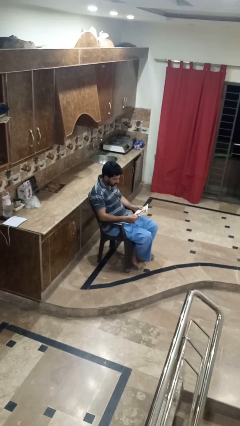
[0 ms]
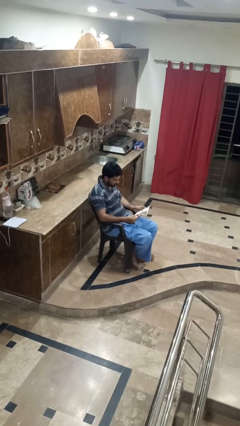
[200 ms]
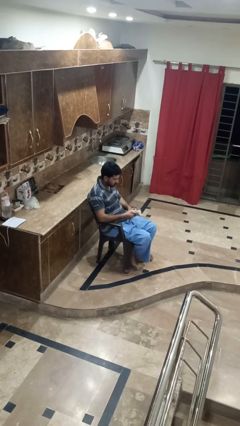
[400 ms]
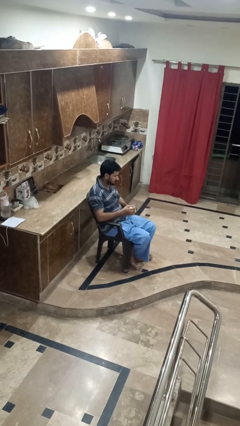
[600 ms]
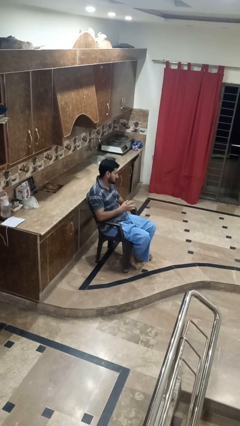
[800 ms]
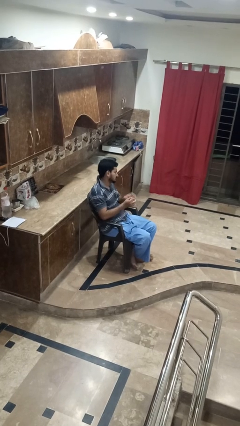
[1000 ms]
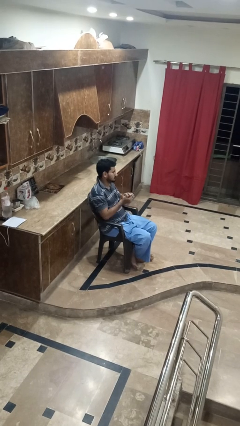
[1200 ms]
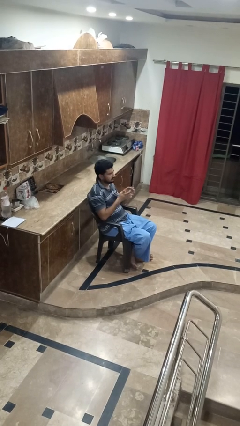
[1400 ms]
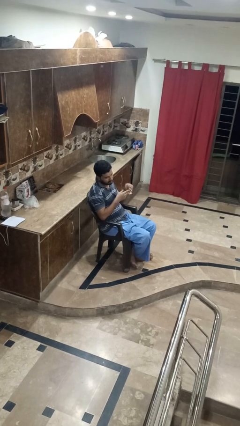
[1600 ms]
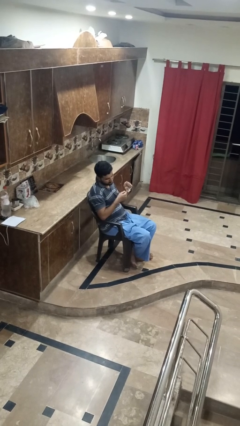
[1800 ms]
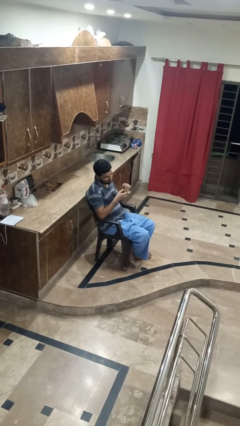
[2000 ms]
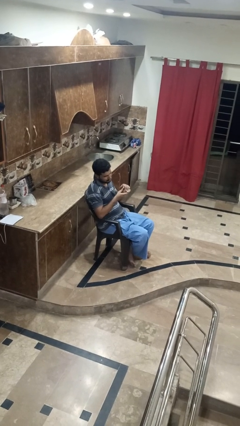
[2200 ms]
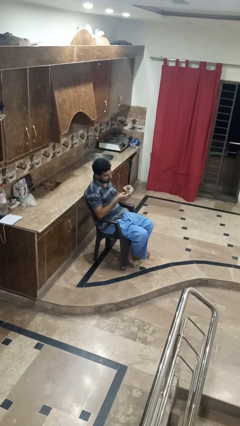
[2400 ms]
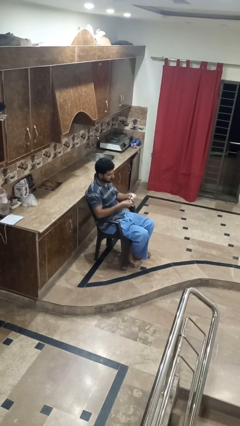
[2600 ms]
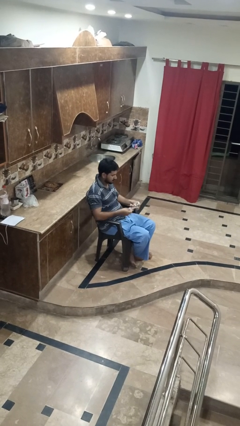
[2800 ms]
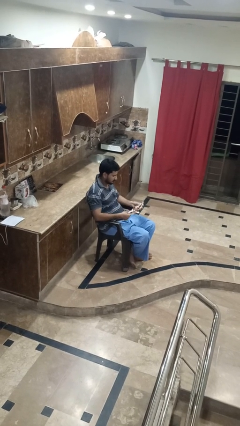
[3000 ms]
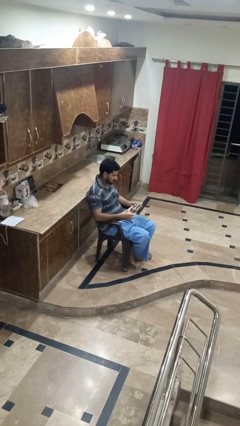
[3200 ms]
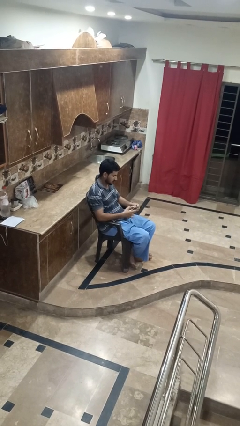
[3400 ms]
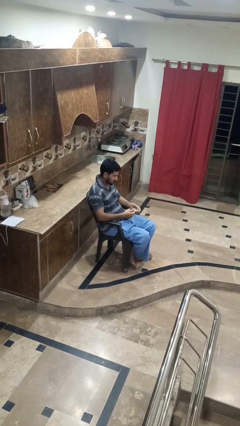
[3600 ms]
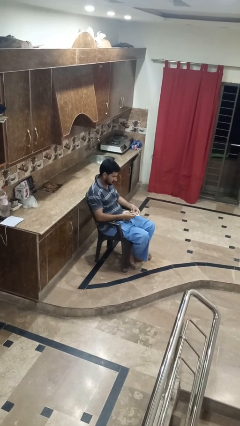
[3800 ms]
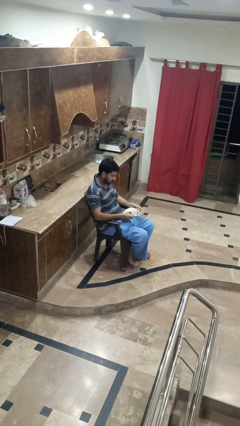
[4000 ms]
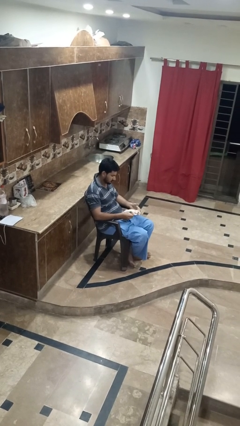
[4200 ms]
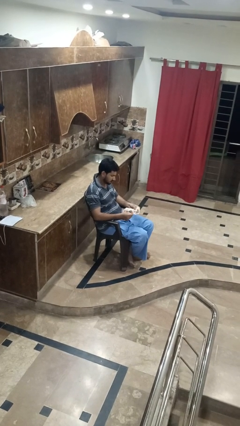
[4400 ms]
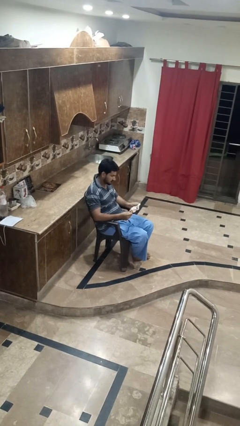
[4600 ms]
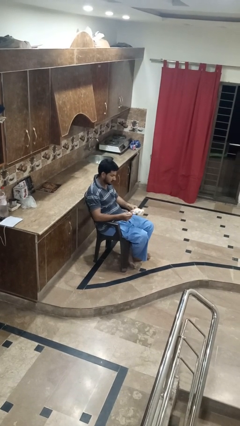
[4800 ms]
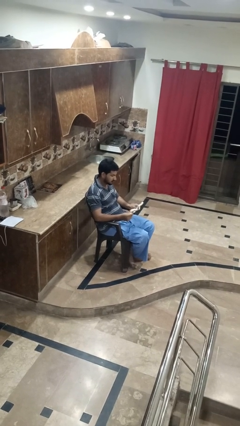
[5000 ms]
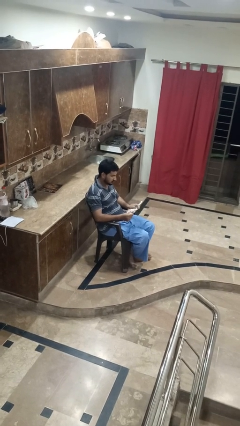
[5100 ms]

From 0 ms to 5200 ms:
person crumples paper

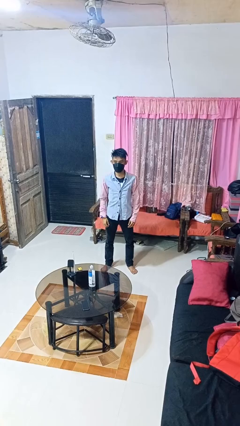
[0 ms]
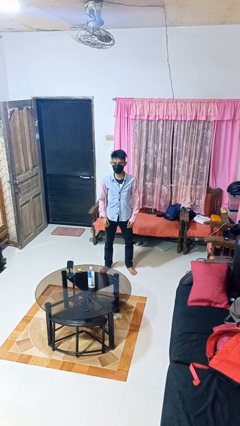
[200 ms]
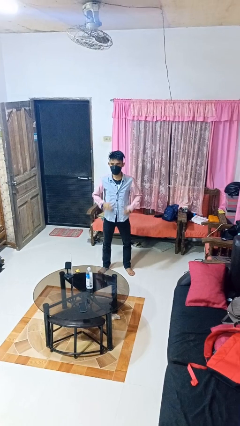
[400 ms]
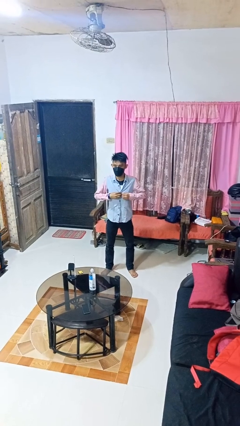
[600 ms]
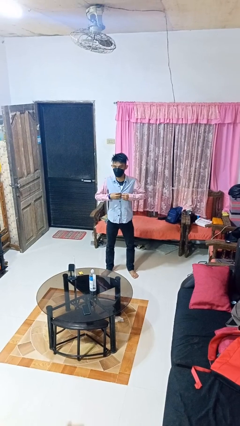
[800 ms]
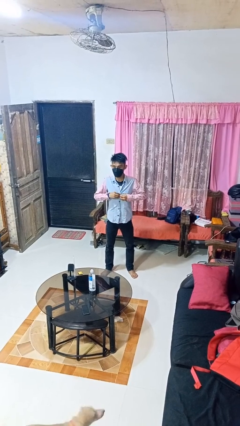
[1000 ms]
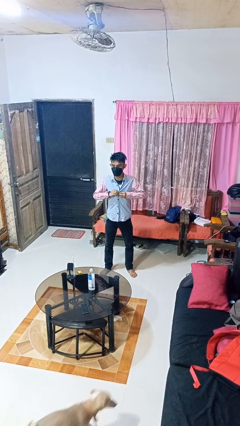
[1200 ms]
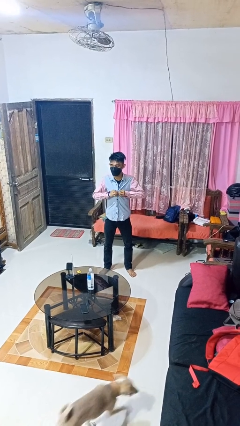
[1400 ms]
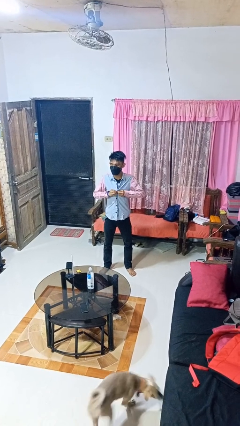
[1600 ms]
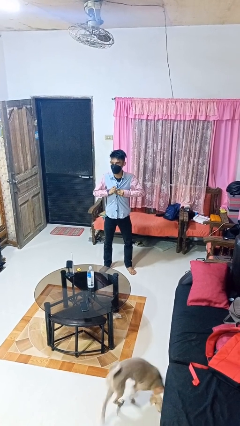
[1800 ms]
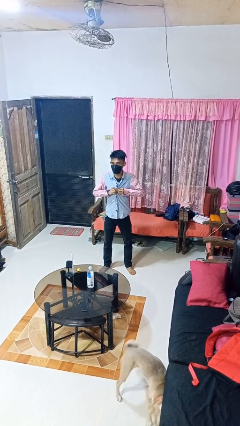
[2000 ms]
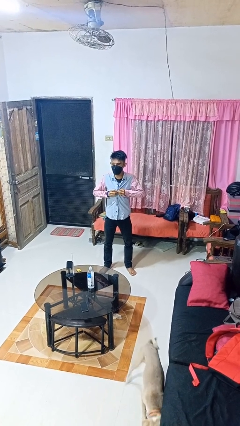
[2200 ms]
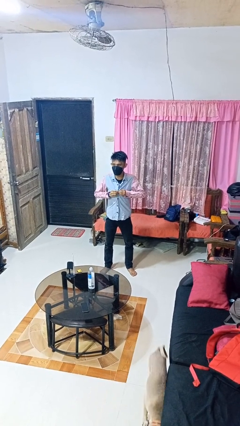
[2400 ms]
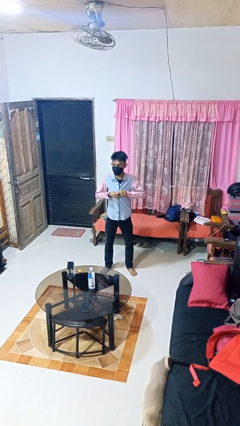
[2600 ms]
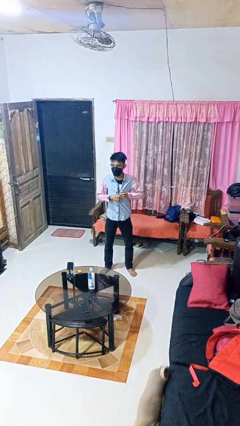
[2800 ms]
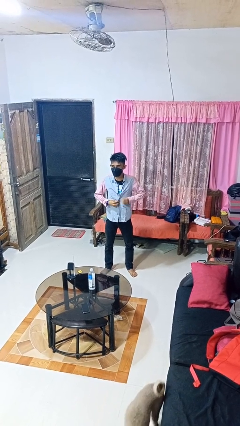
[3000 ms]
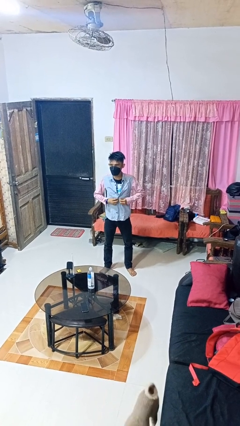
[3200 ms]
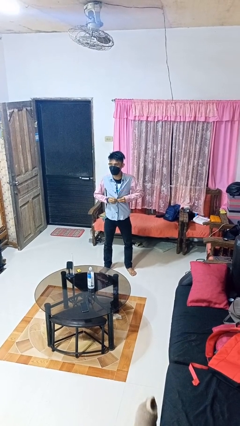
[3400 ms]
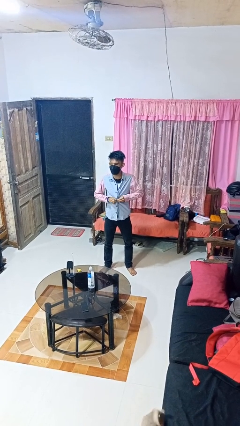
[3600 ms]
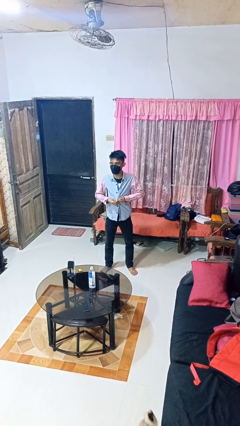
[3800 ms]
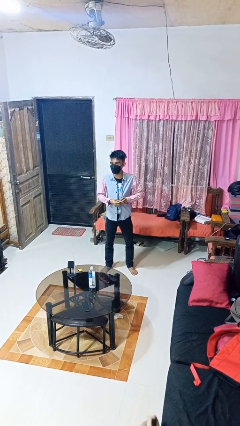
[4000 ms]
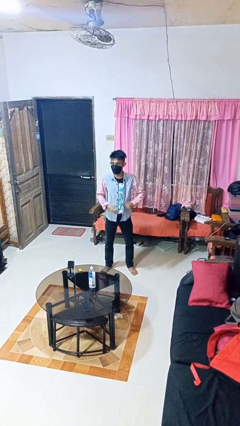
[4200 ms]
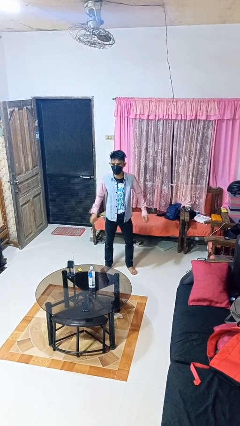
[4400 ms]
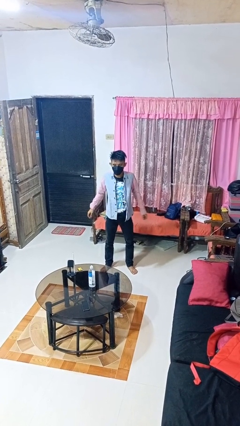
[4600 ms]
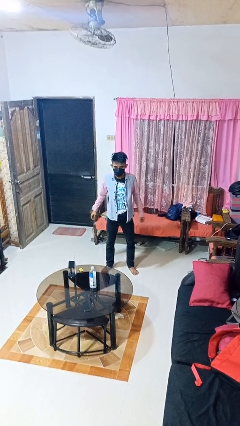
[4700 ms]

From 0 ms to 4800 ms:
person unbuttons shirt

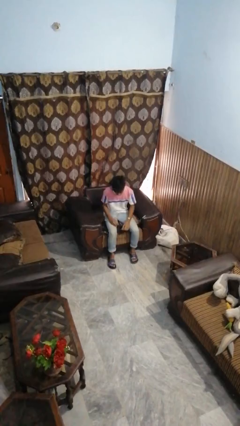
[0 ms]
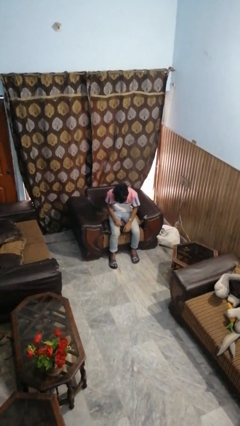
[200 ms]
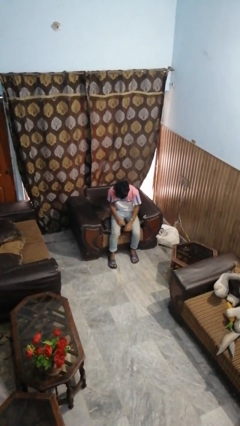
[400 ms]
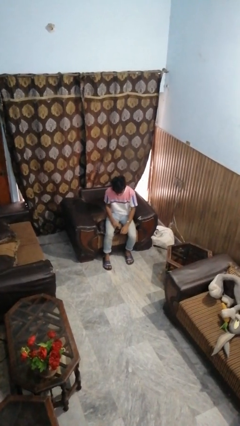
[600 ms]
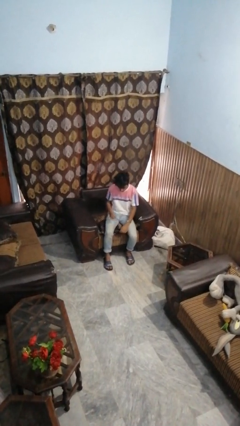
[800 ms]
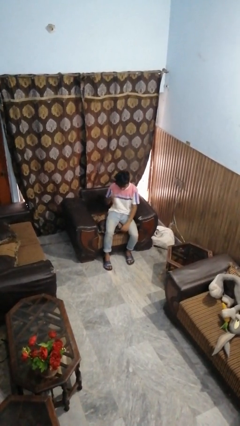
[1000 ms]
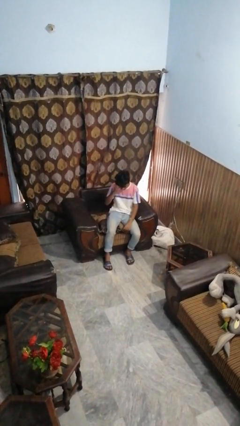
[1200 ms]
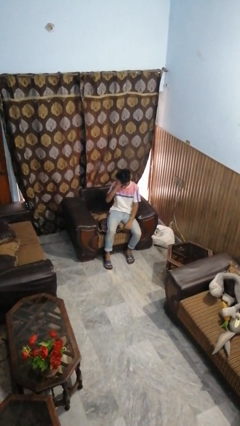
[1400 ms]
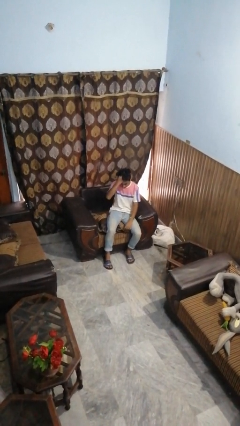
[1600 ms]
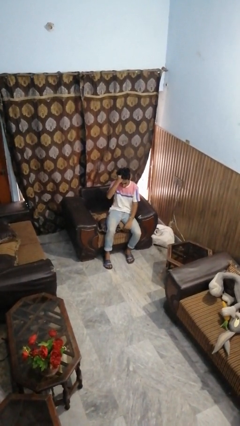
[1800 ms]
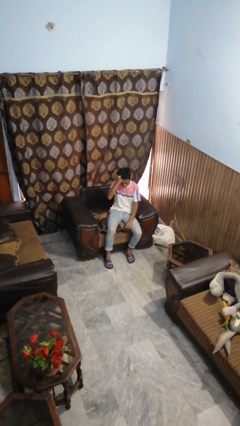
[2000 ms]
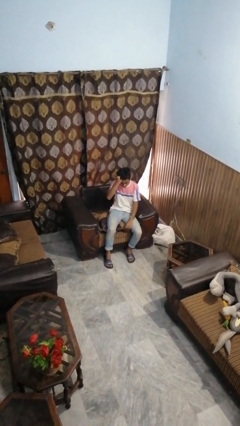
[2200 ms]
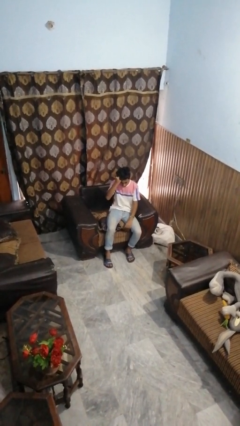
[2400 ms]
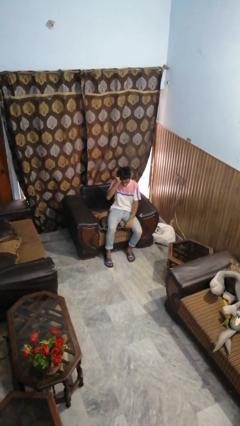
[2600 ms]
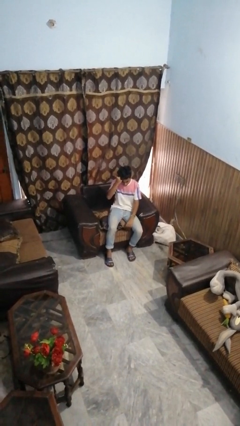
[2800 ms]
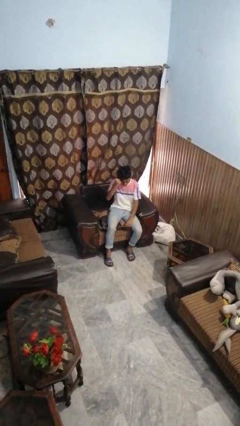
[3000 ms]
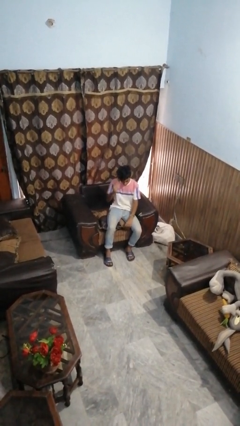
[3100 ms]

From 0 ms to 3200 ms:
person strokes hair

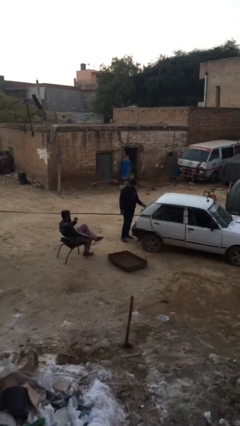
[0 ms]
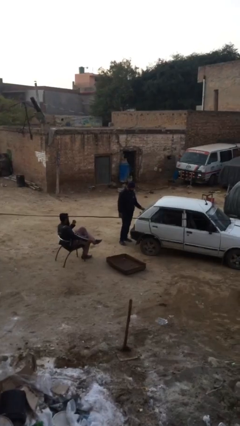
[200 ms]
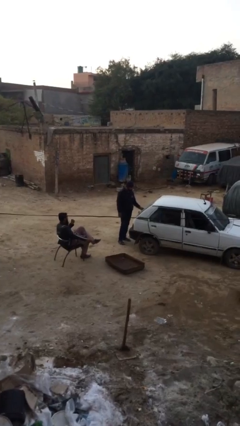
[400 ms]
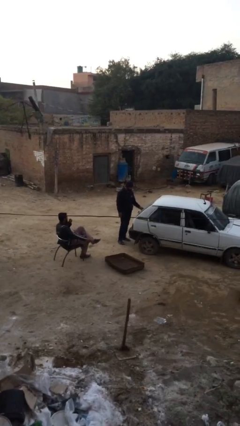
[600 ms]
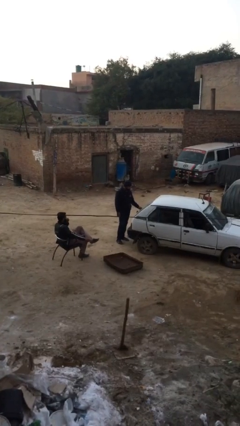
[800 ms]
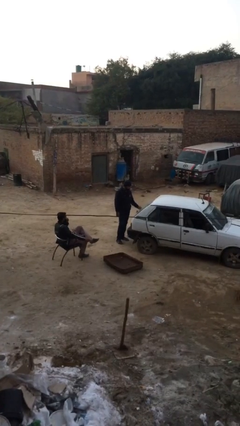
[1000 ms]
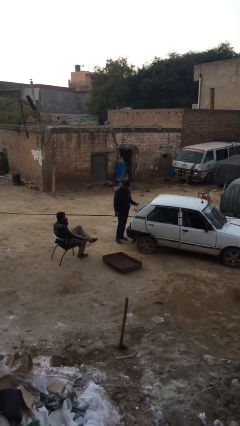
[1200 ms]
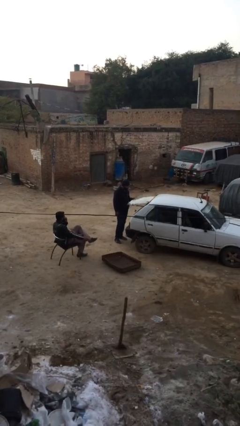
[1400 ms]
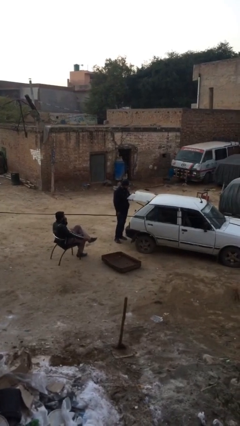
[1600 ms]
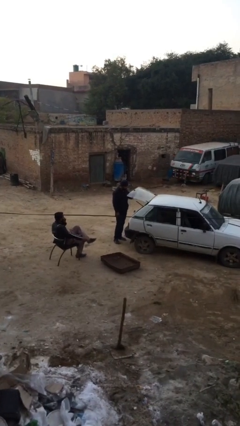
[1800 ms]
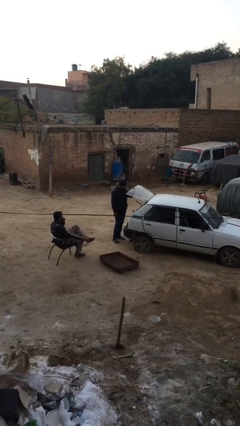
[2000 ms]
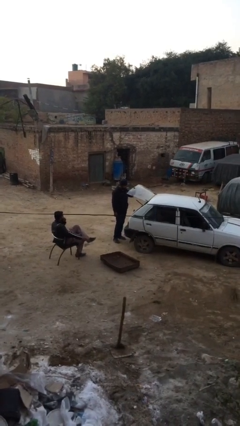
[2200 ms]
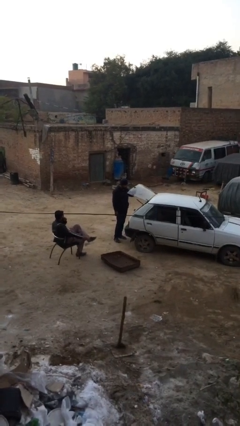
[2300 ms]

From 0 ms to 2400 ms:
person opens car trunk

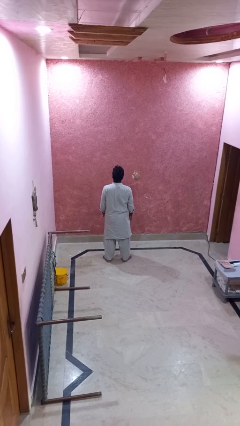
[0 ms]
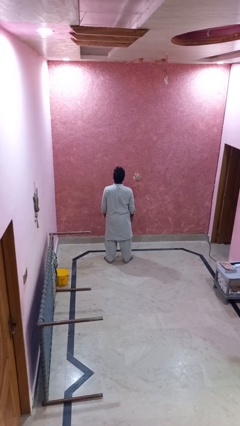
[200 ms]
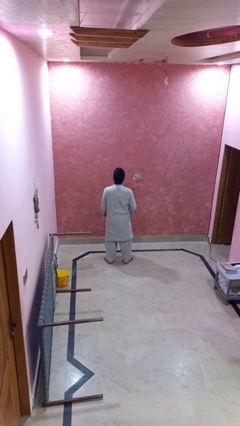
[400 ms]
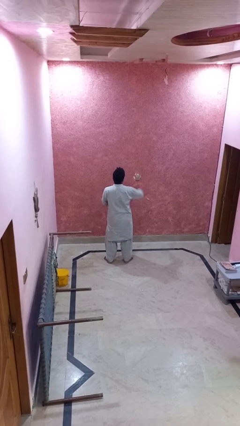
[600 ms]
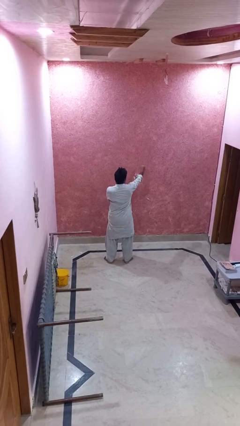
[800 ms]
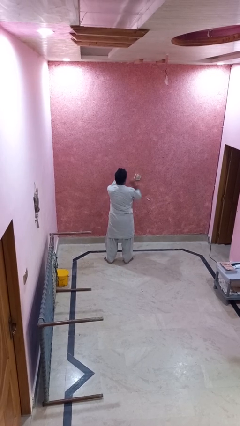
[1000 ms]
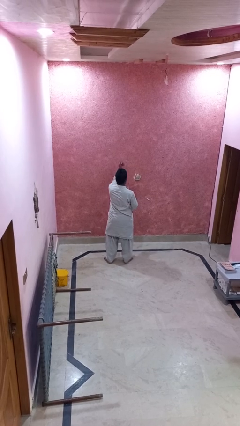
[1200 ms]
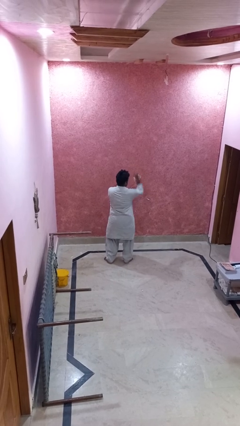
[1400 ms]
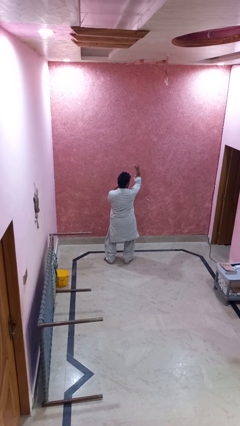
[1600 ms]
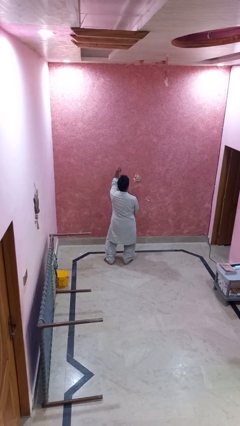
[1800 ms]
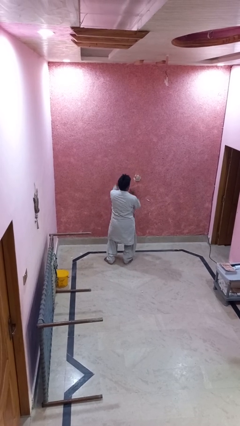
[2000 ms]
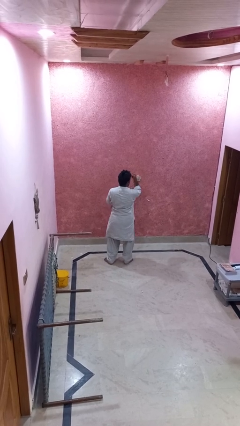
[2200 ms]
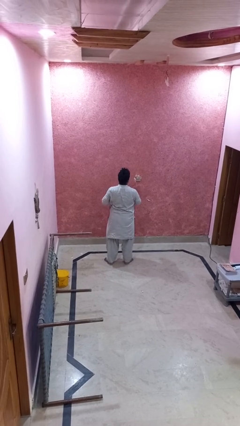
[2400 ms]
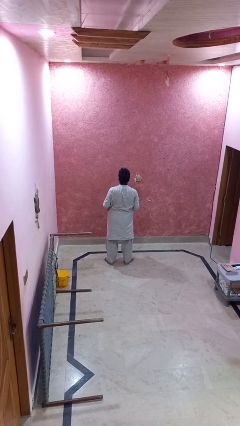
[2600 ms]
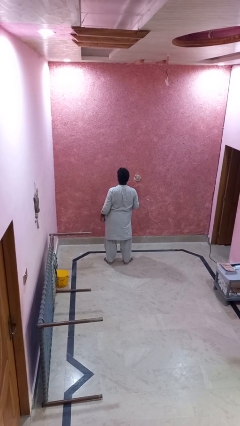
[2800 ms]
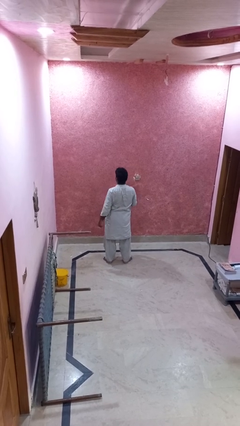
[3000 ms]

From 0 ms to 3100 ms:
person dances in place
